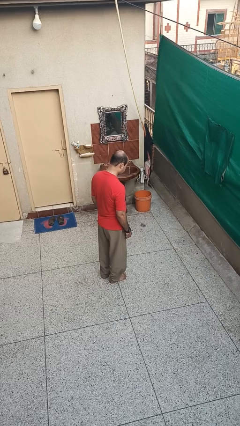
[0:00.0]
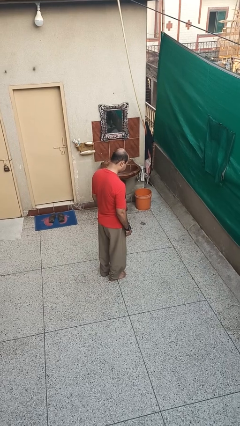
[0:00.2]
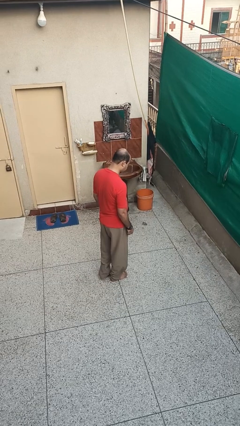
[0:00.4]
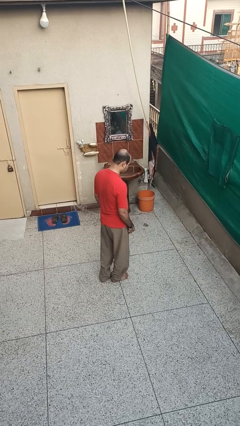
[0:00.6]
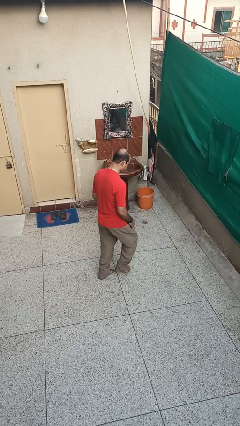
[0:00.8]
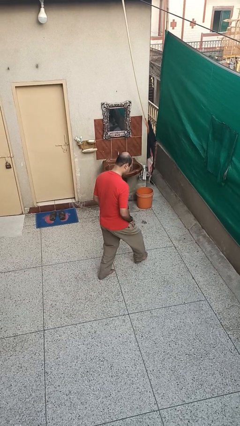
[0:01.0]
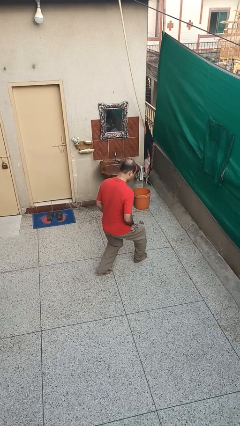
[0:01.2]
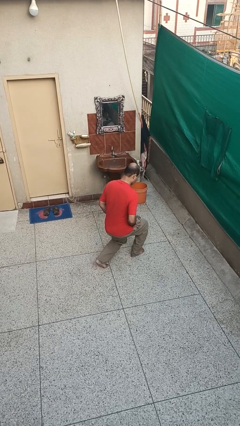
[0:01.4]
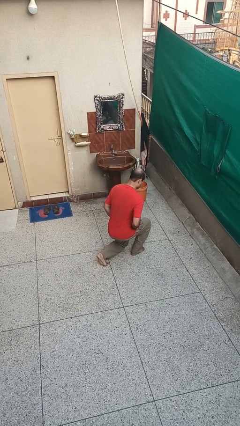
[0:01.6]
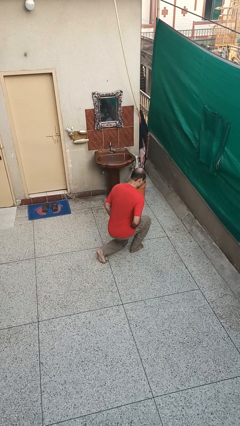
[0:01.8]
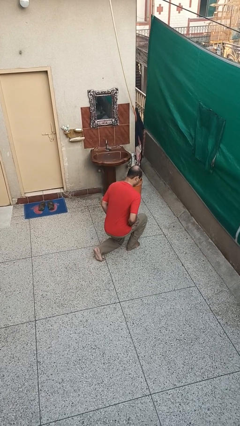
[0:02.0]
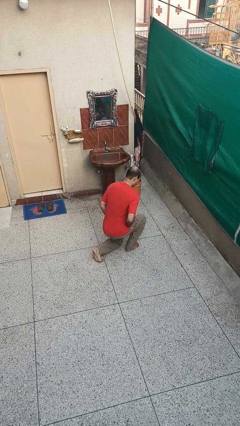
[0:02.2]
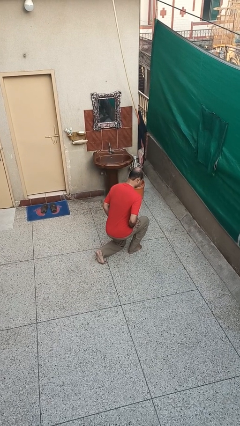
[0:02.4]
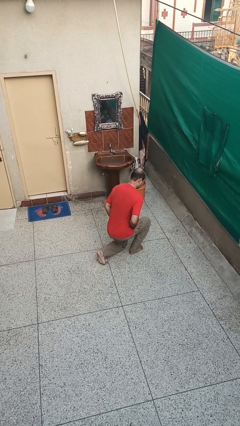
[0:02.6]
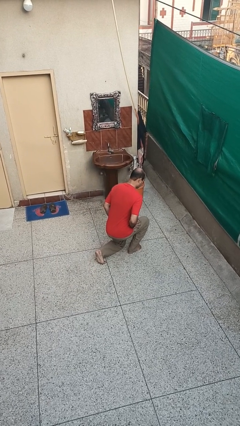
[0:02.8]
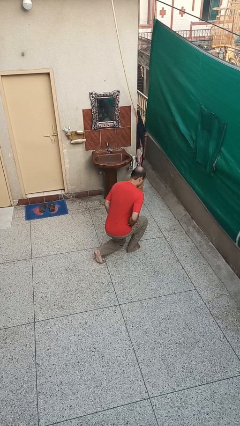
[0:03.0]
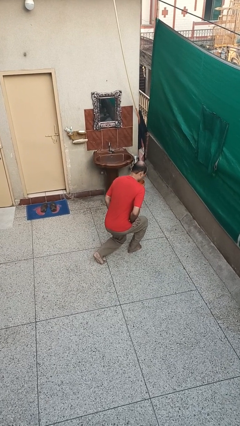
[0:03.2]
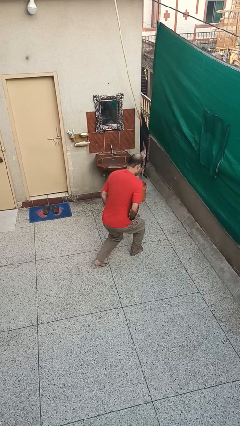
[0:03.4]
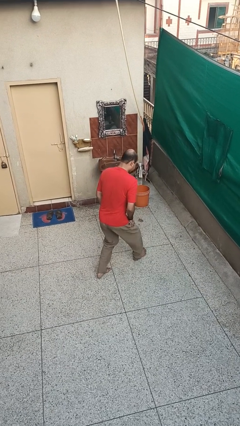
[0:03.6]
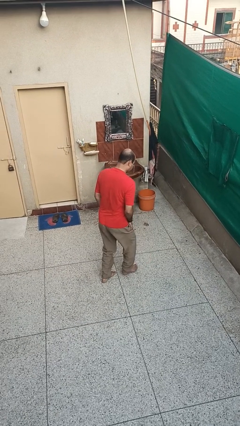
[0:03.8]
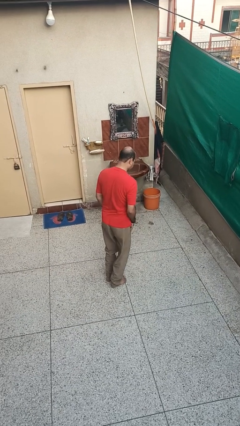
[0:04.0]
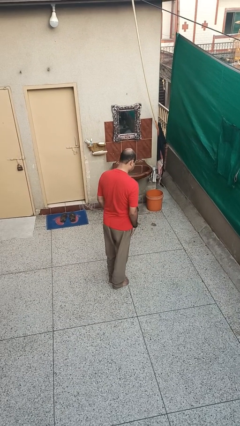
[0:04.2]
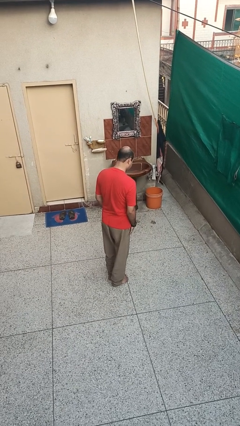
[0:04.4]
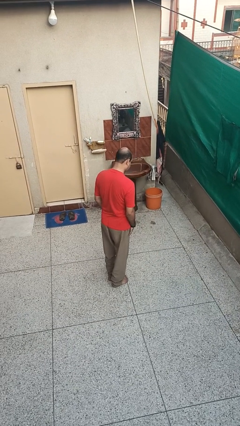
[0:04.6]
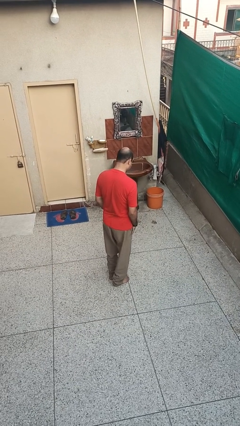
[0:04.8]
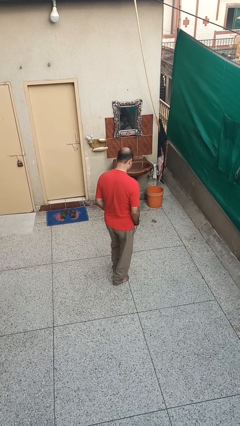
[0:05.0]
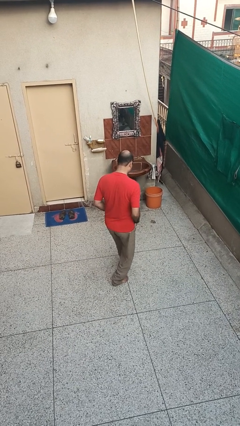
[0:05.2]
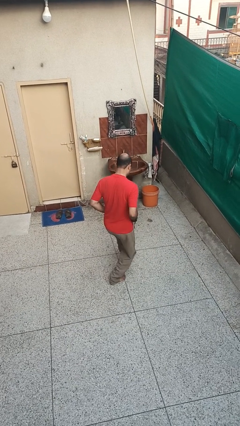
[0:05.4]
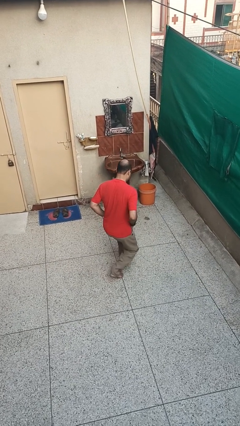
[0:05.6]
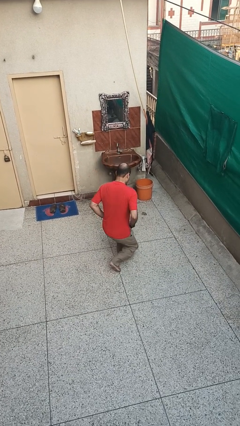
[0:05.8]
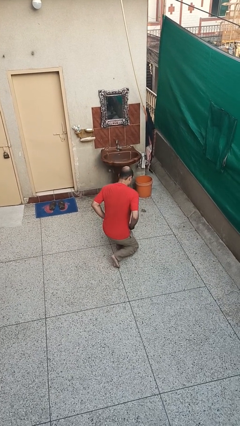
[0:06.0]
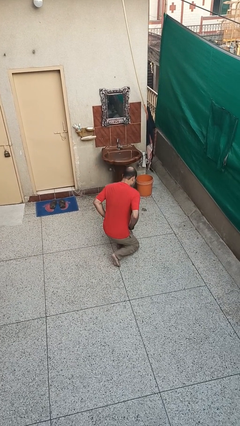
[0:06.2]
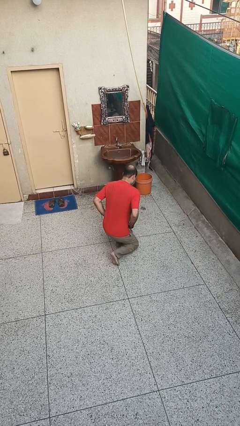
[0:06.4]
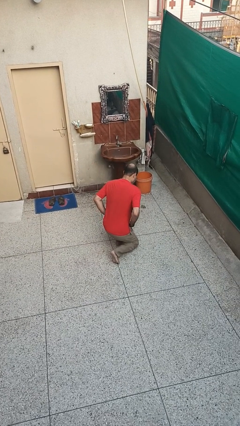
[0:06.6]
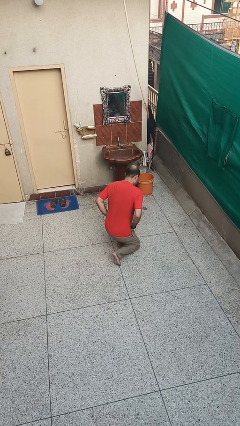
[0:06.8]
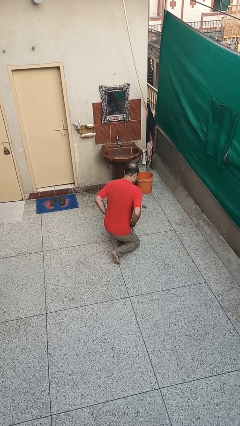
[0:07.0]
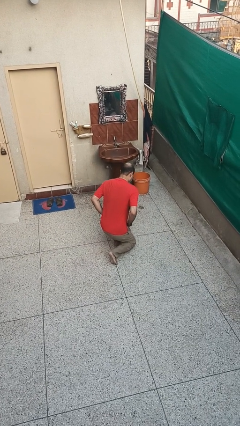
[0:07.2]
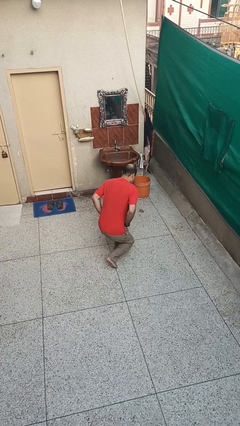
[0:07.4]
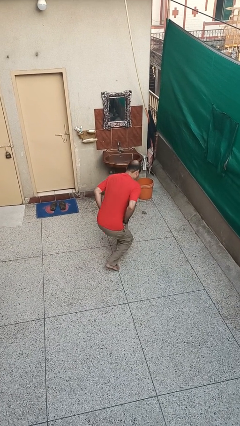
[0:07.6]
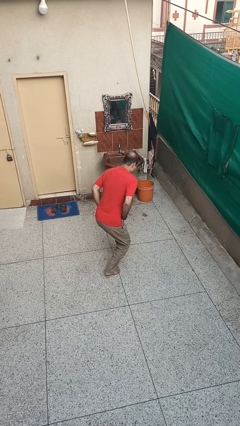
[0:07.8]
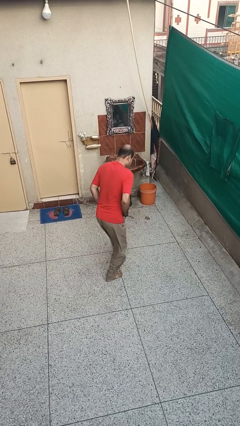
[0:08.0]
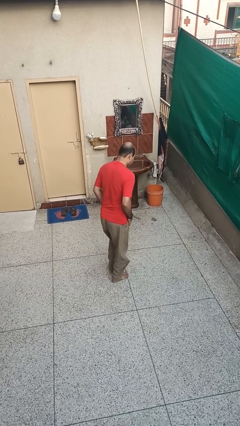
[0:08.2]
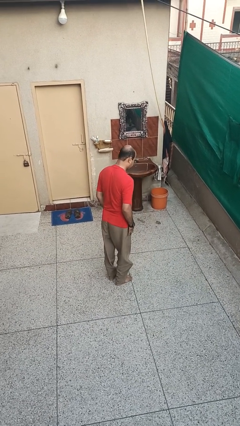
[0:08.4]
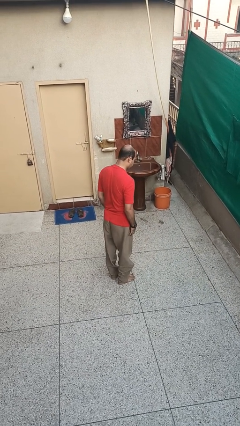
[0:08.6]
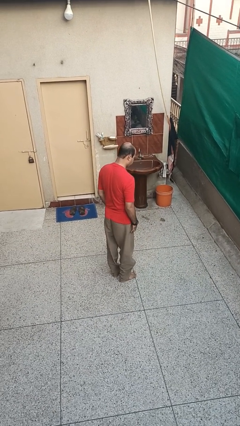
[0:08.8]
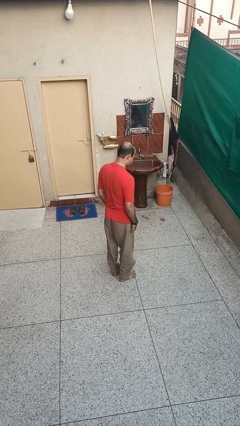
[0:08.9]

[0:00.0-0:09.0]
person exercises with lunges

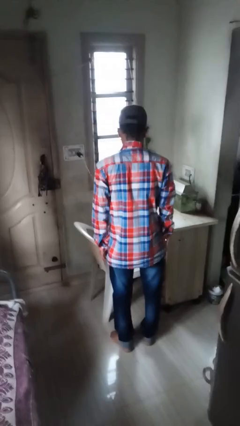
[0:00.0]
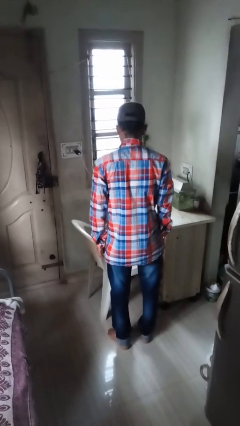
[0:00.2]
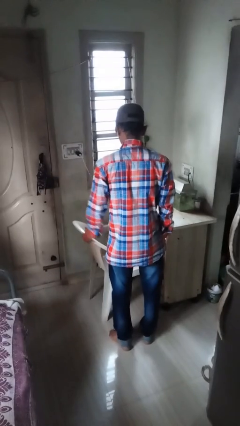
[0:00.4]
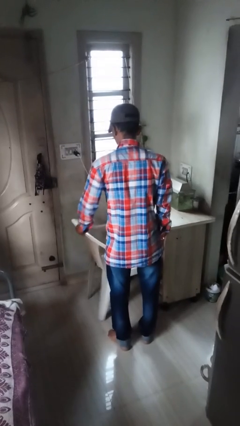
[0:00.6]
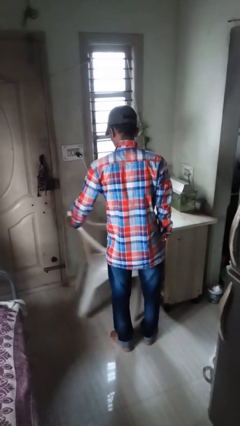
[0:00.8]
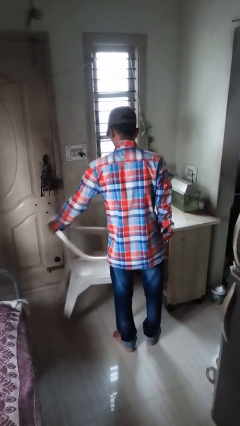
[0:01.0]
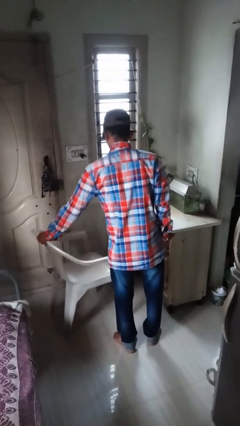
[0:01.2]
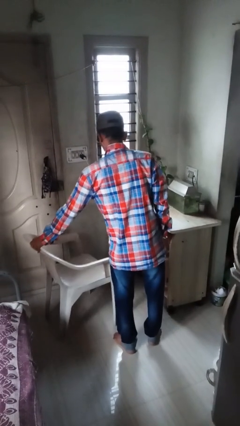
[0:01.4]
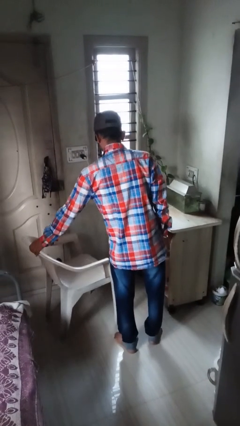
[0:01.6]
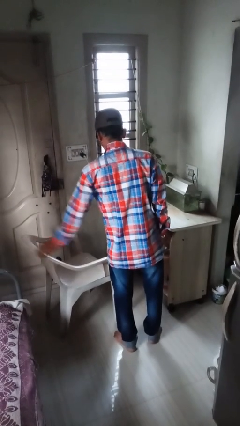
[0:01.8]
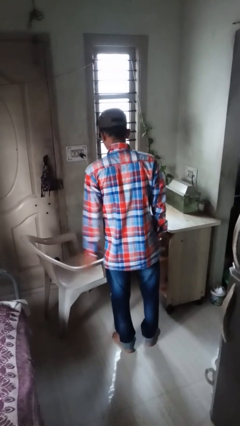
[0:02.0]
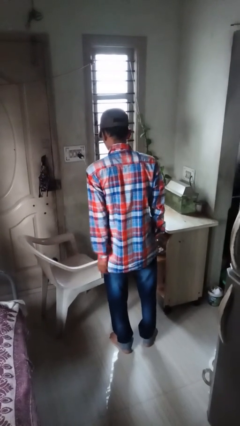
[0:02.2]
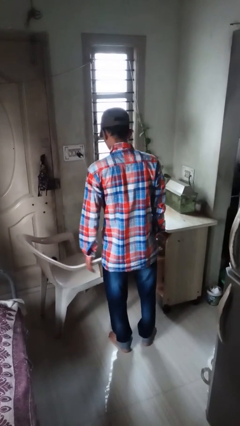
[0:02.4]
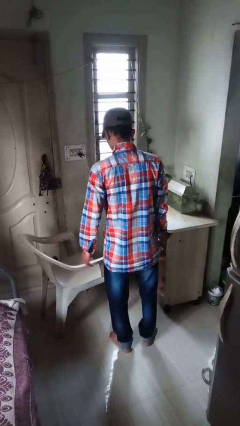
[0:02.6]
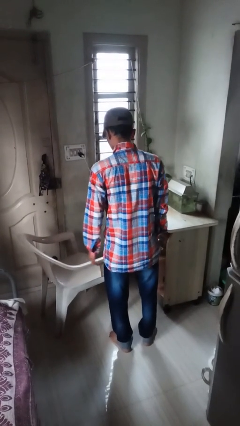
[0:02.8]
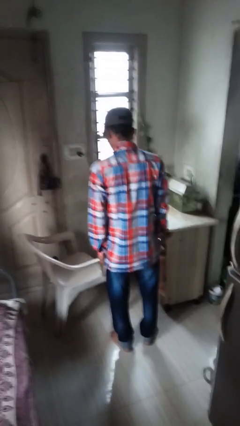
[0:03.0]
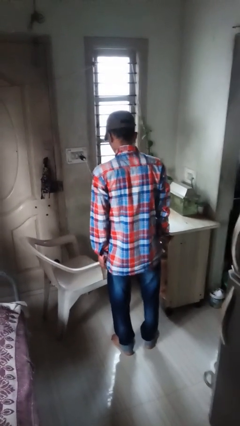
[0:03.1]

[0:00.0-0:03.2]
person pulls out chair

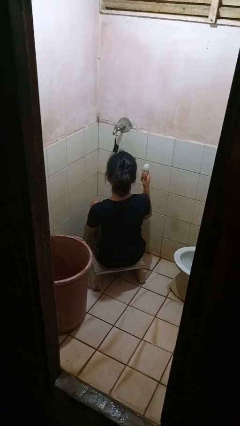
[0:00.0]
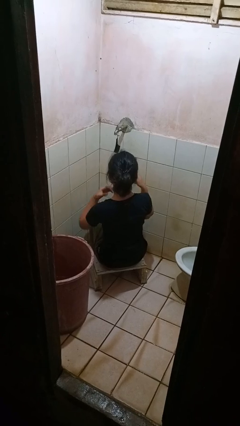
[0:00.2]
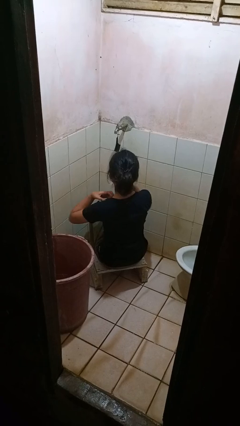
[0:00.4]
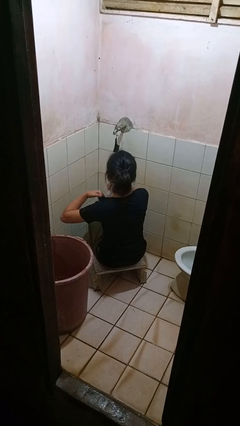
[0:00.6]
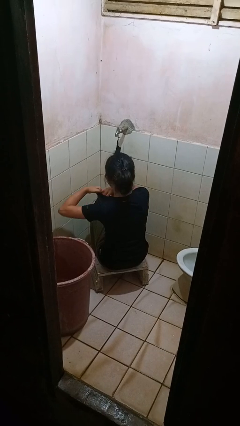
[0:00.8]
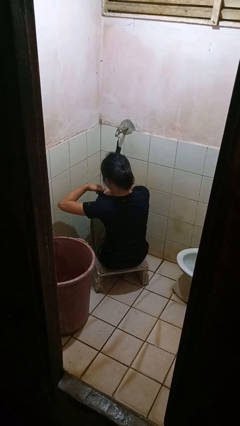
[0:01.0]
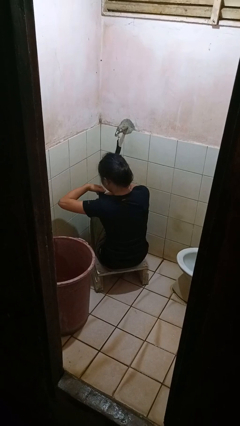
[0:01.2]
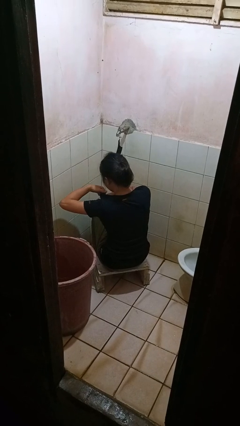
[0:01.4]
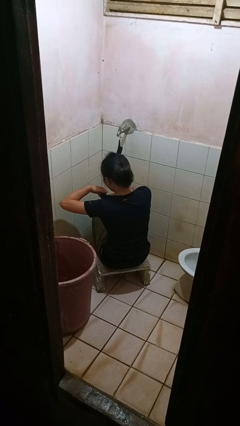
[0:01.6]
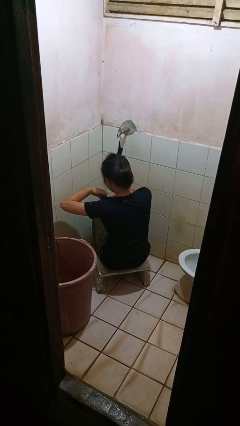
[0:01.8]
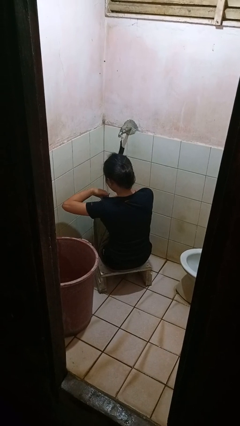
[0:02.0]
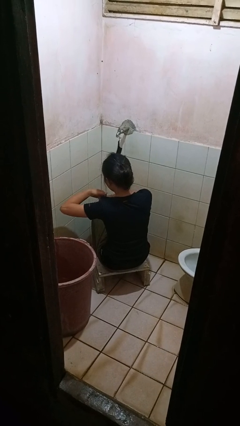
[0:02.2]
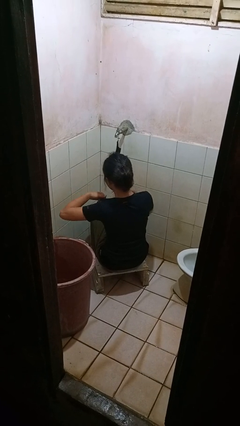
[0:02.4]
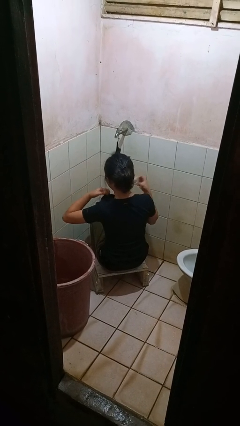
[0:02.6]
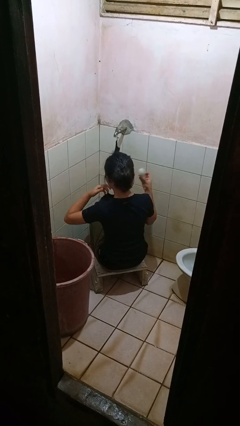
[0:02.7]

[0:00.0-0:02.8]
person applies deodorant

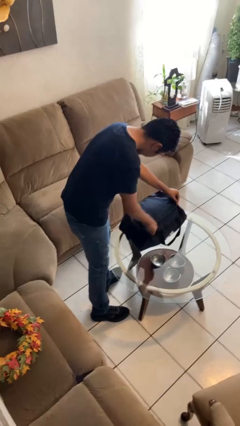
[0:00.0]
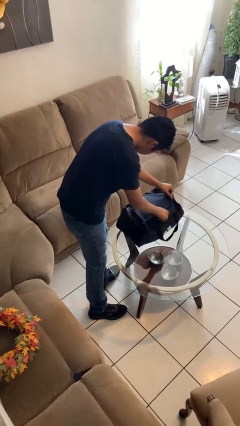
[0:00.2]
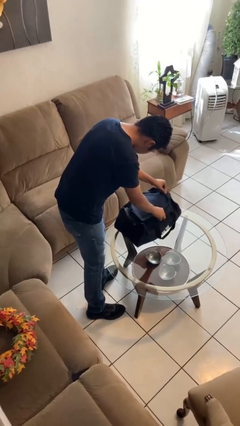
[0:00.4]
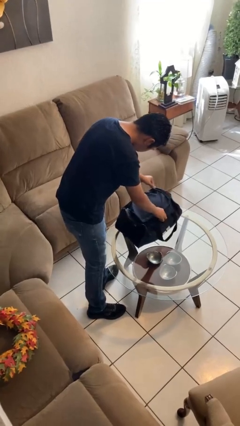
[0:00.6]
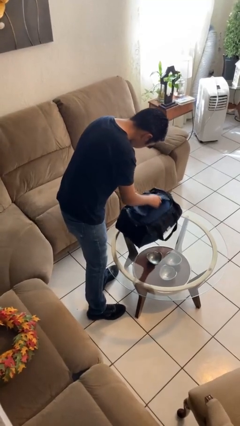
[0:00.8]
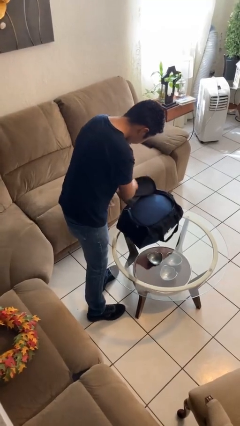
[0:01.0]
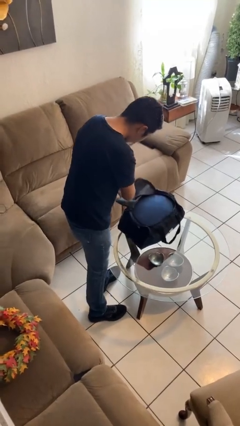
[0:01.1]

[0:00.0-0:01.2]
person opens suitcase

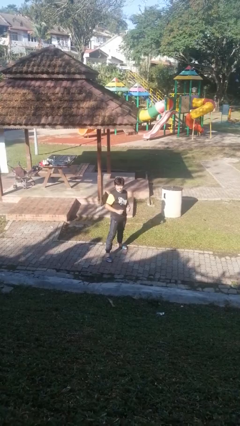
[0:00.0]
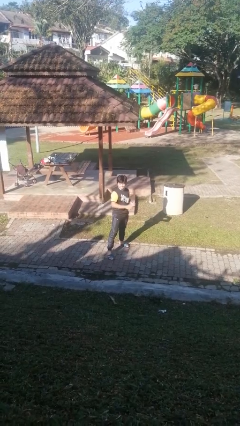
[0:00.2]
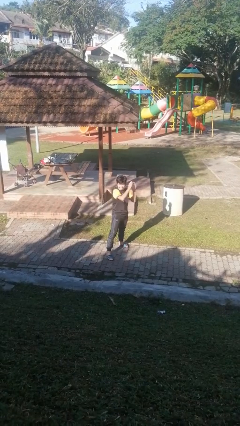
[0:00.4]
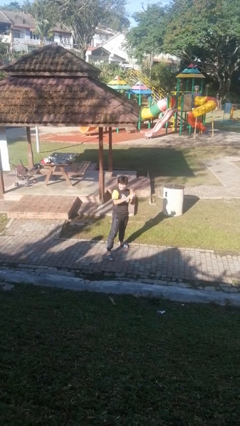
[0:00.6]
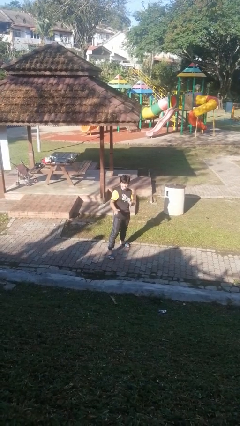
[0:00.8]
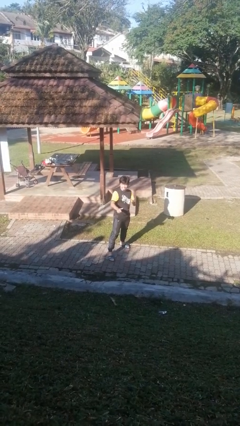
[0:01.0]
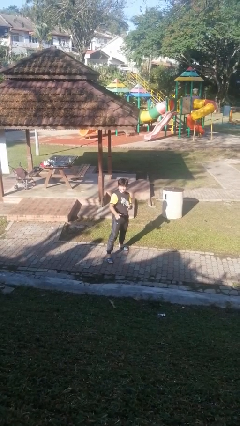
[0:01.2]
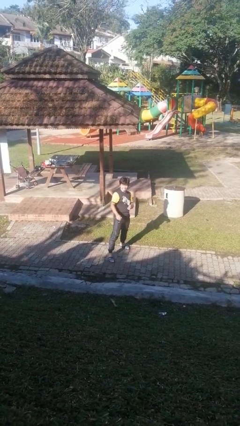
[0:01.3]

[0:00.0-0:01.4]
person karate chop
